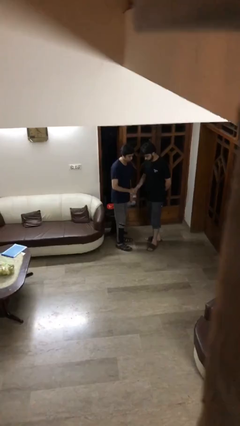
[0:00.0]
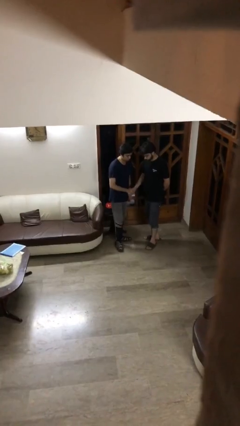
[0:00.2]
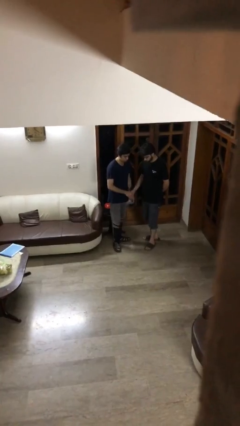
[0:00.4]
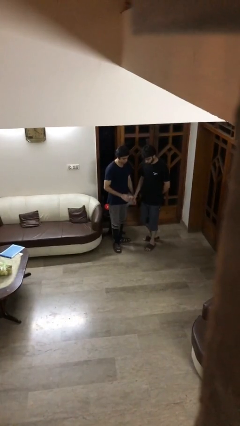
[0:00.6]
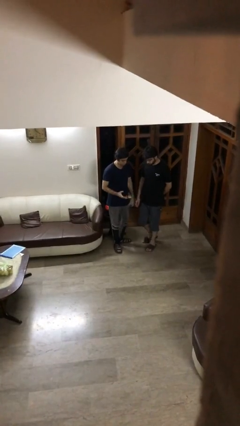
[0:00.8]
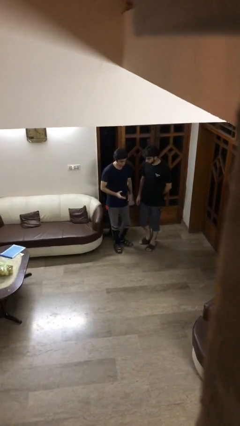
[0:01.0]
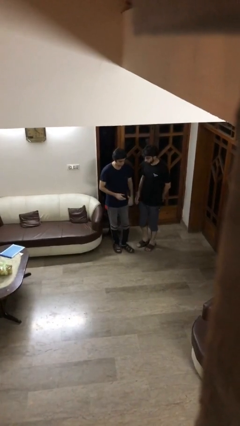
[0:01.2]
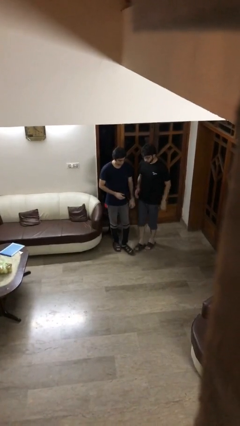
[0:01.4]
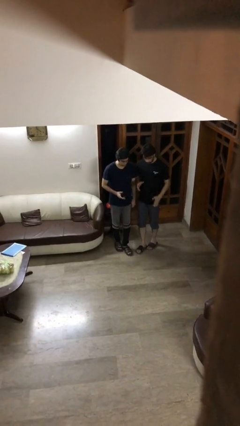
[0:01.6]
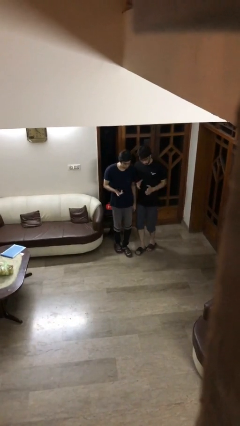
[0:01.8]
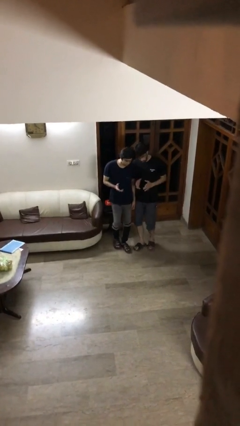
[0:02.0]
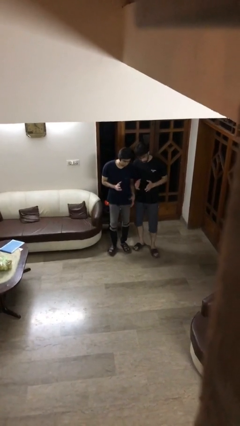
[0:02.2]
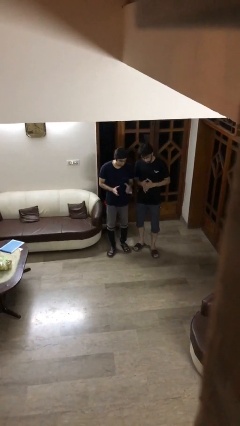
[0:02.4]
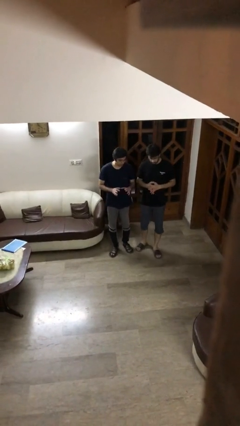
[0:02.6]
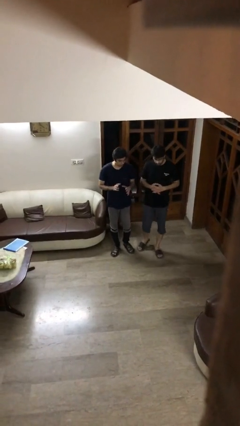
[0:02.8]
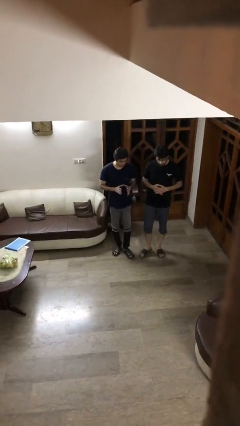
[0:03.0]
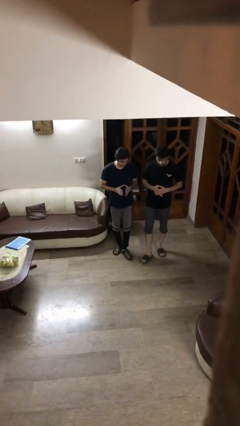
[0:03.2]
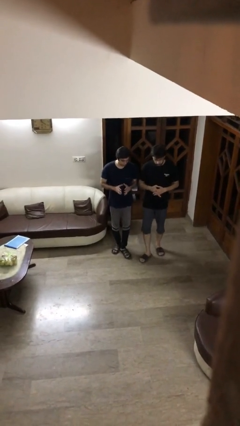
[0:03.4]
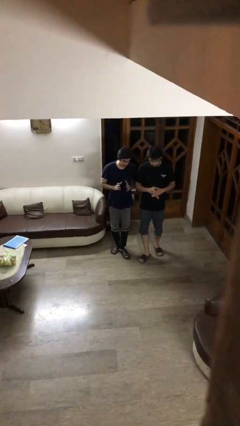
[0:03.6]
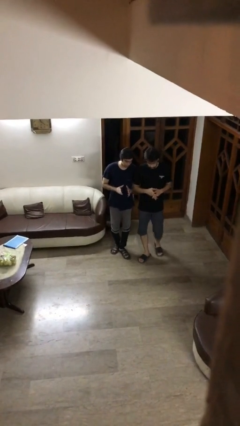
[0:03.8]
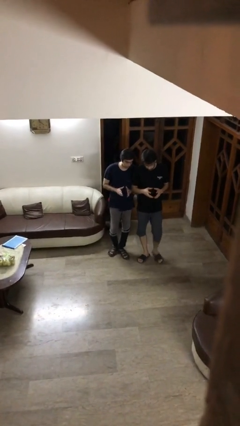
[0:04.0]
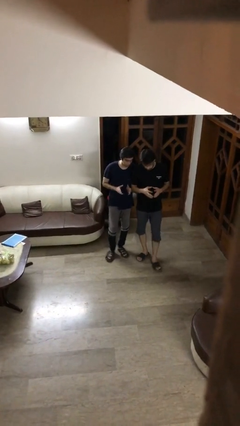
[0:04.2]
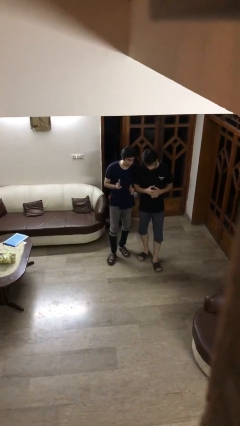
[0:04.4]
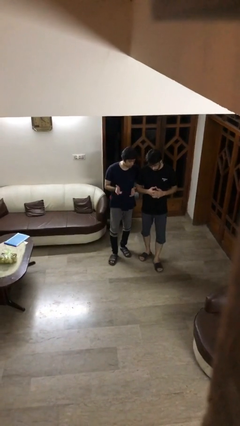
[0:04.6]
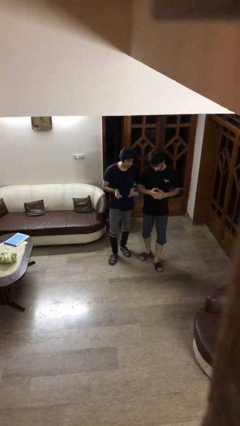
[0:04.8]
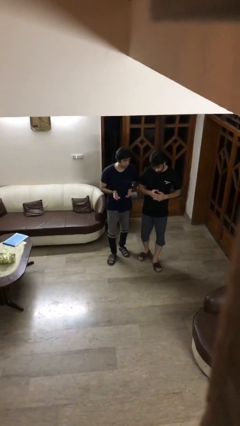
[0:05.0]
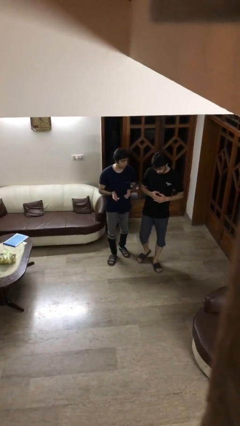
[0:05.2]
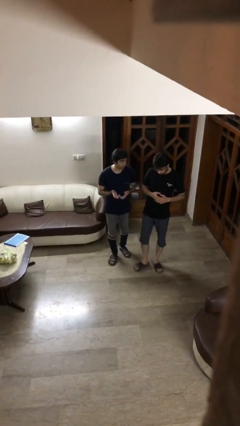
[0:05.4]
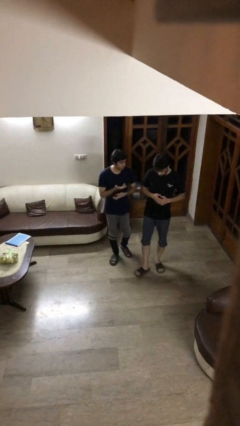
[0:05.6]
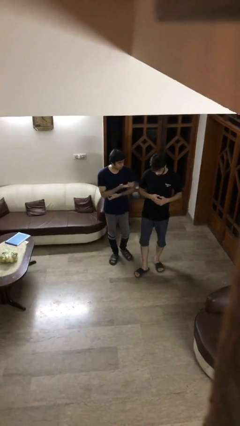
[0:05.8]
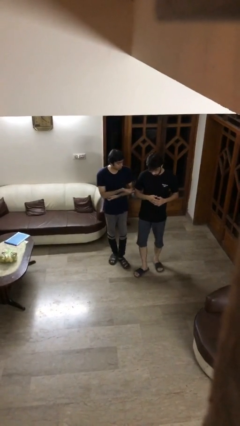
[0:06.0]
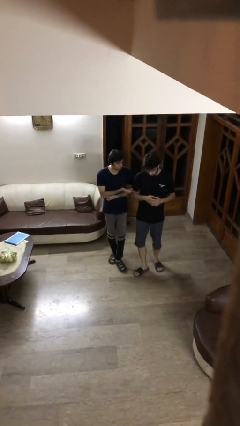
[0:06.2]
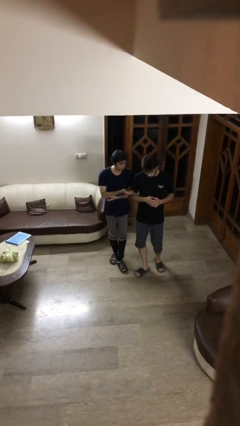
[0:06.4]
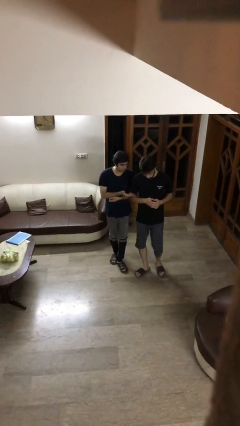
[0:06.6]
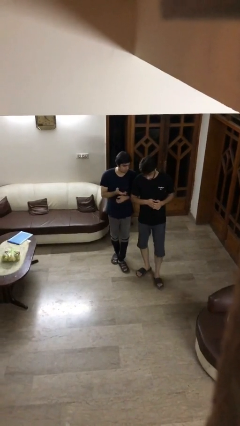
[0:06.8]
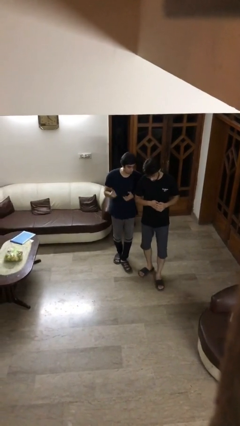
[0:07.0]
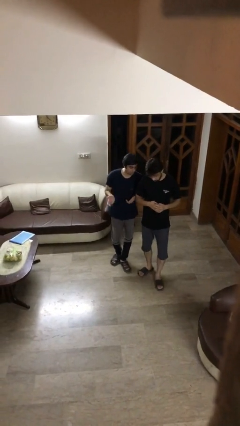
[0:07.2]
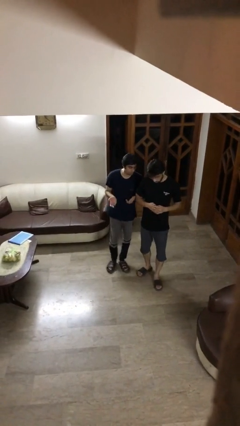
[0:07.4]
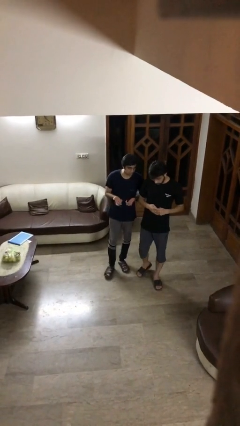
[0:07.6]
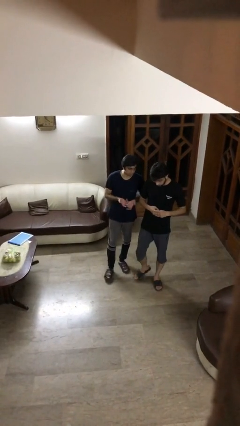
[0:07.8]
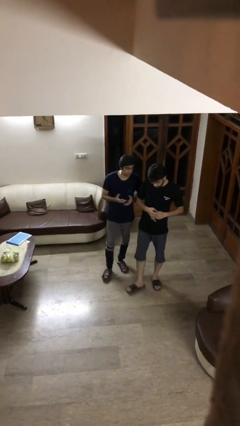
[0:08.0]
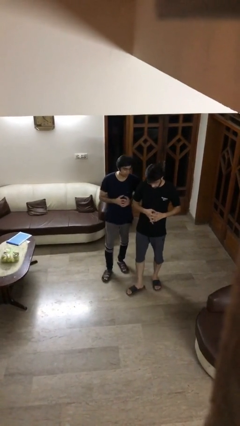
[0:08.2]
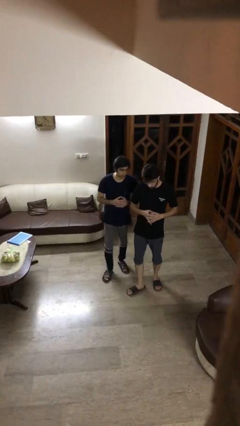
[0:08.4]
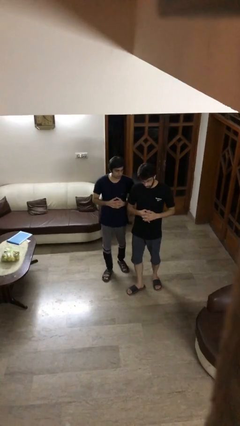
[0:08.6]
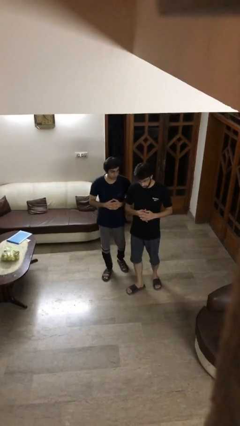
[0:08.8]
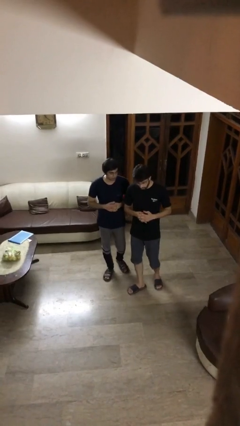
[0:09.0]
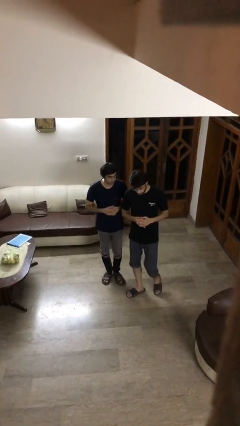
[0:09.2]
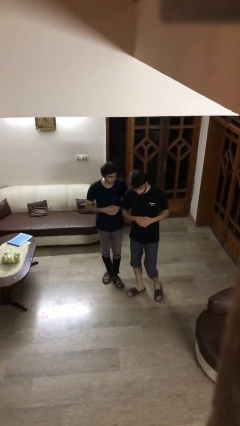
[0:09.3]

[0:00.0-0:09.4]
person talks to person

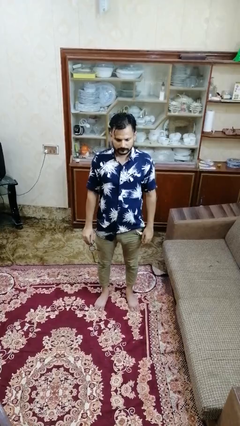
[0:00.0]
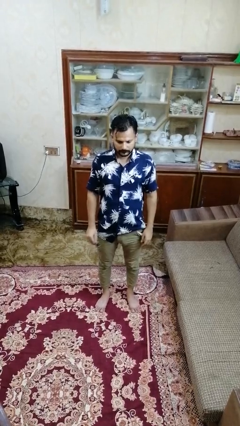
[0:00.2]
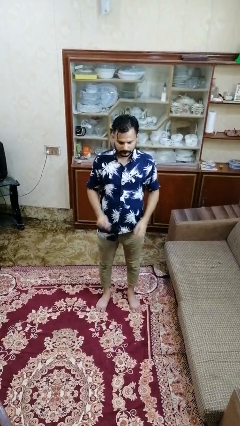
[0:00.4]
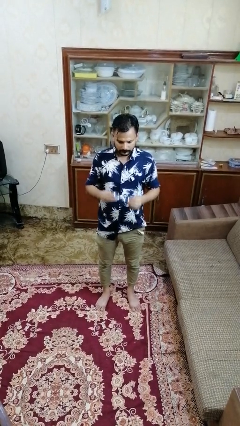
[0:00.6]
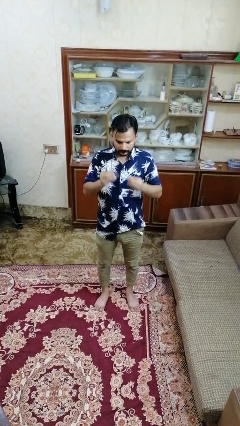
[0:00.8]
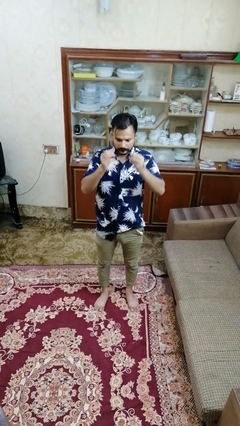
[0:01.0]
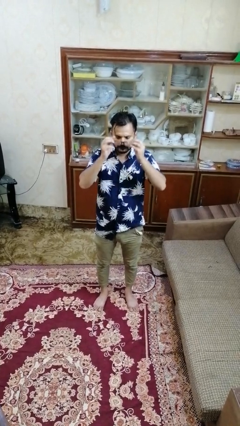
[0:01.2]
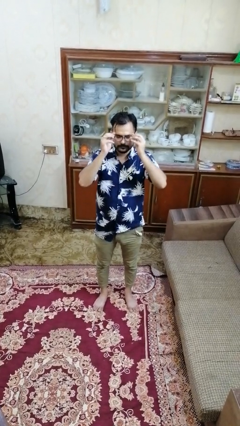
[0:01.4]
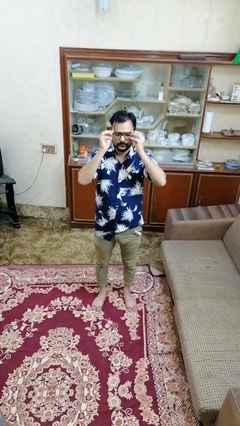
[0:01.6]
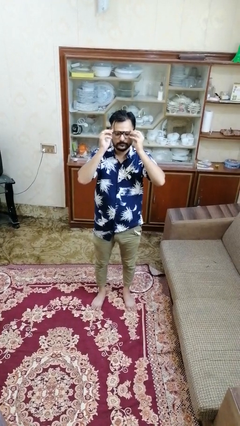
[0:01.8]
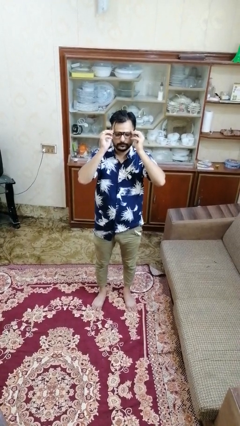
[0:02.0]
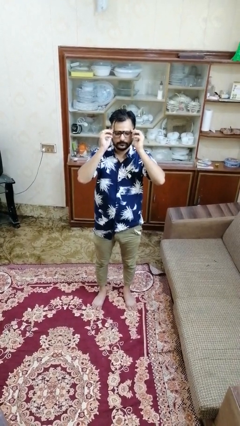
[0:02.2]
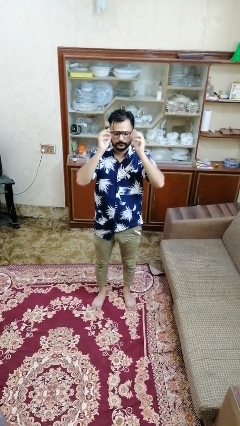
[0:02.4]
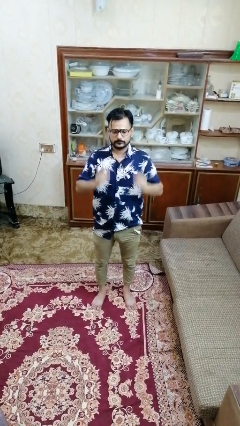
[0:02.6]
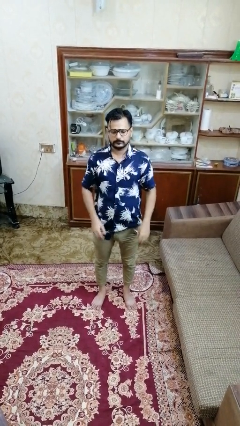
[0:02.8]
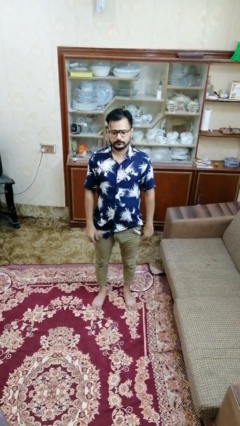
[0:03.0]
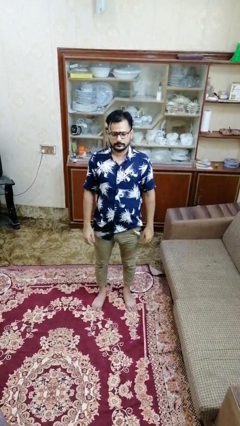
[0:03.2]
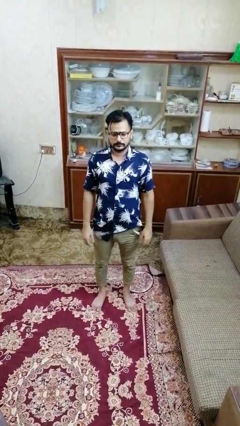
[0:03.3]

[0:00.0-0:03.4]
person puts on glasses

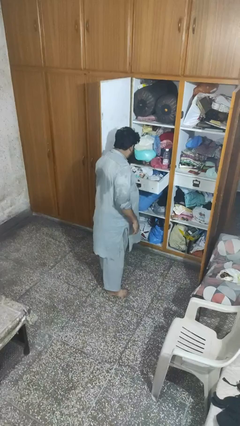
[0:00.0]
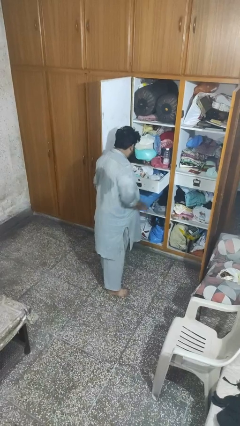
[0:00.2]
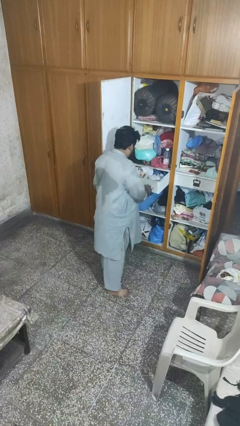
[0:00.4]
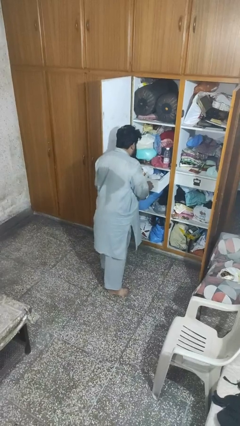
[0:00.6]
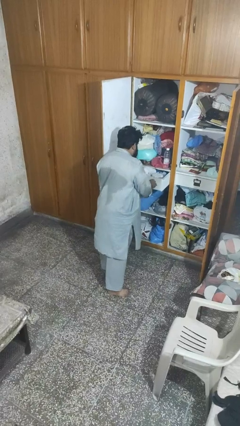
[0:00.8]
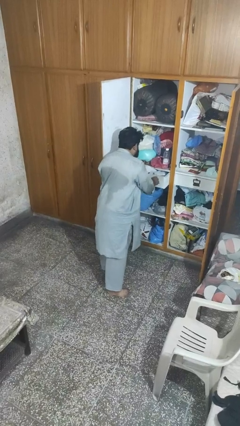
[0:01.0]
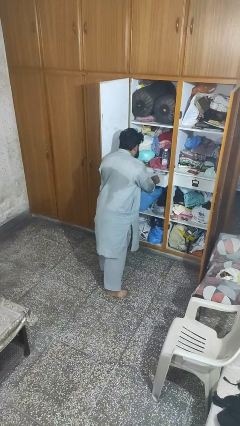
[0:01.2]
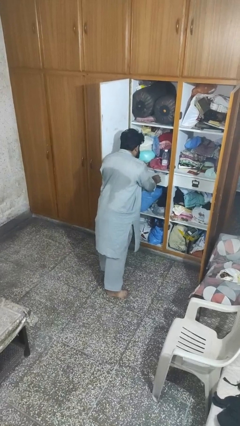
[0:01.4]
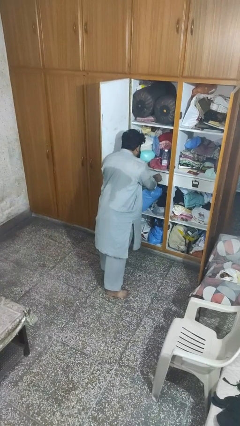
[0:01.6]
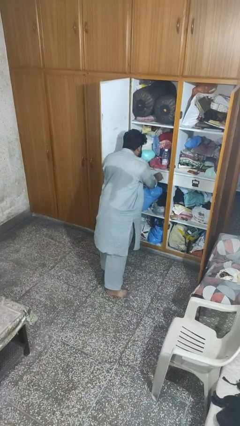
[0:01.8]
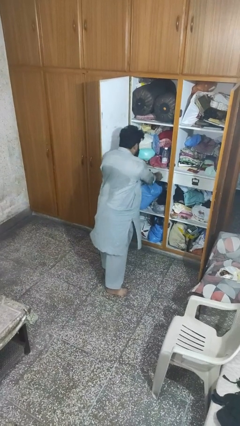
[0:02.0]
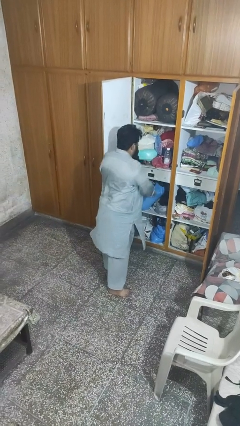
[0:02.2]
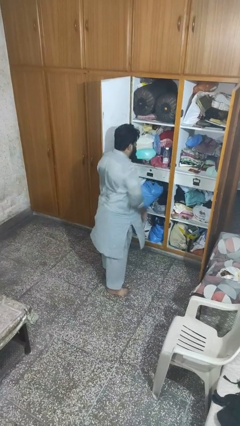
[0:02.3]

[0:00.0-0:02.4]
person closes dresser drawer

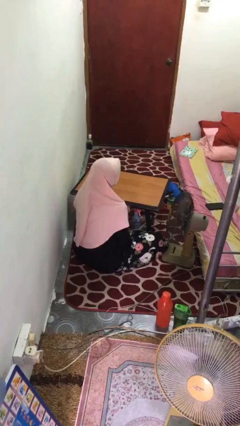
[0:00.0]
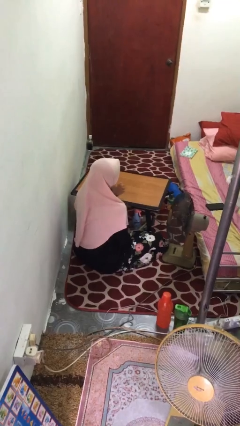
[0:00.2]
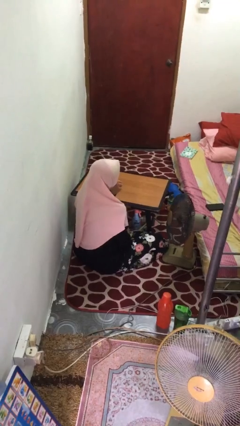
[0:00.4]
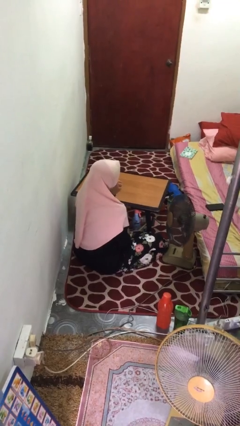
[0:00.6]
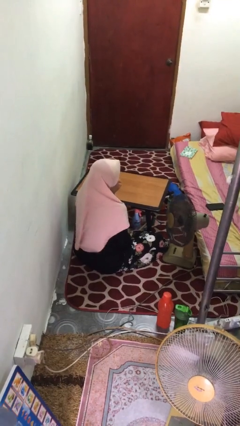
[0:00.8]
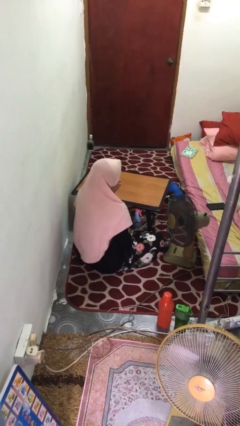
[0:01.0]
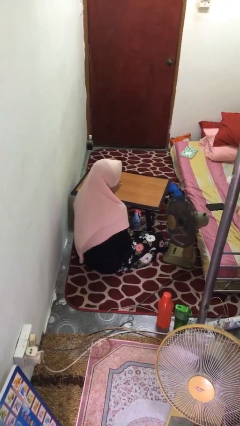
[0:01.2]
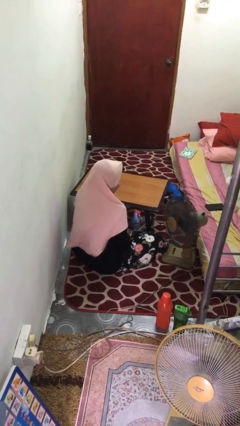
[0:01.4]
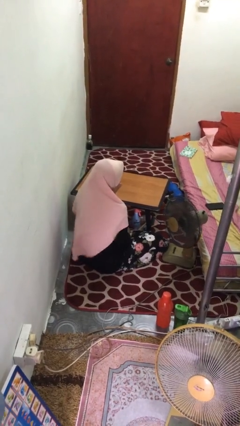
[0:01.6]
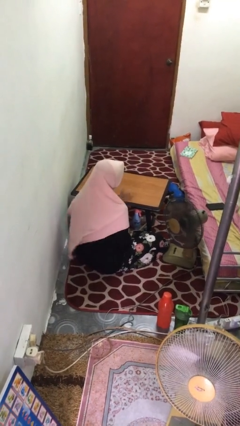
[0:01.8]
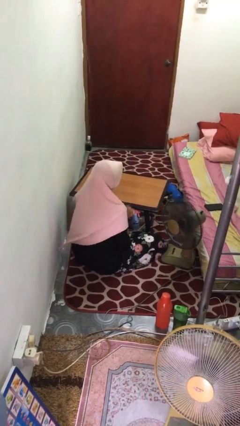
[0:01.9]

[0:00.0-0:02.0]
person licks fingers

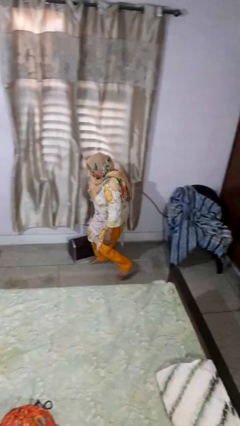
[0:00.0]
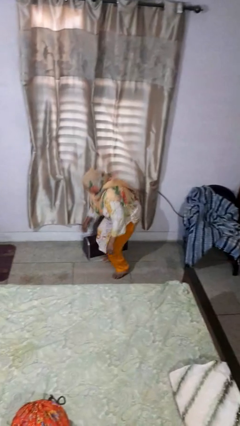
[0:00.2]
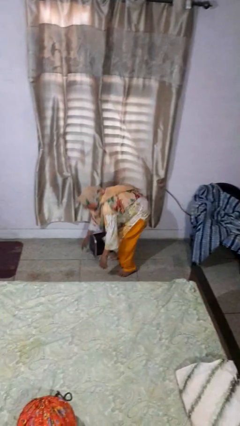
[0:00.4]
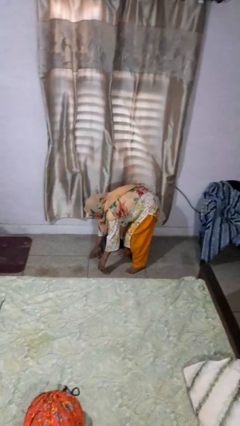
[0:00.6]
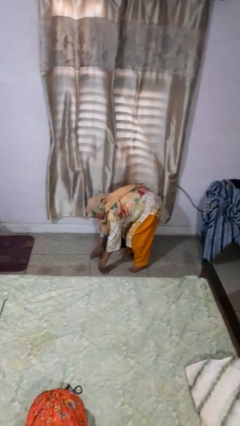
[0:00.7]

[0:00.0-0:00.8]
person trips on object on floor
